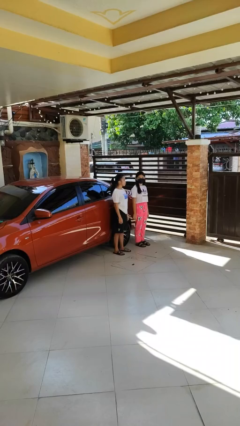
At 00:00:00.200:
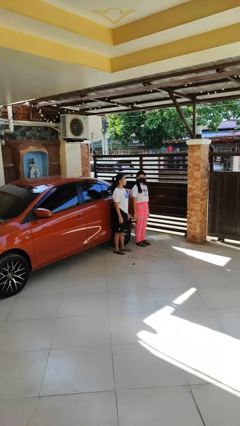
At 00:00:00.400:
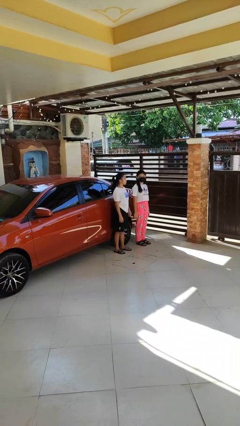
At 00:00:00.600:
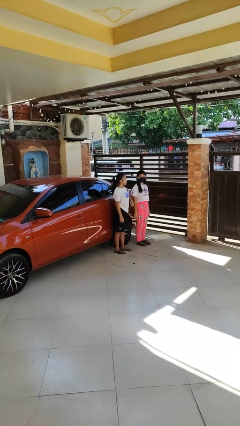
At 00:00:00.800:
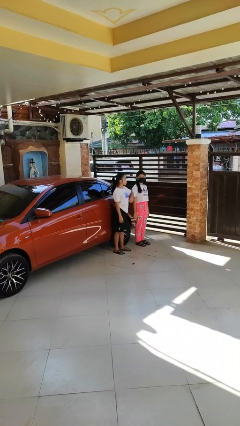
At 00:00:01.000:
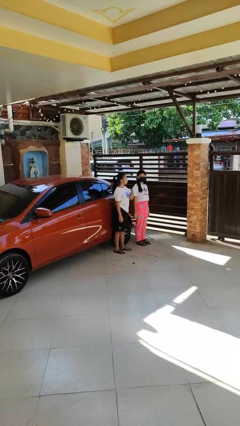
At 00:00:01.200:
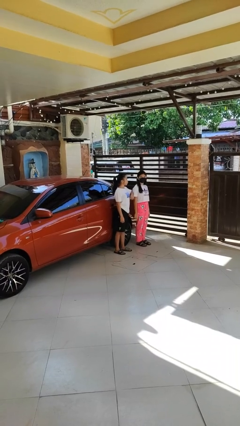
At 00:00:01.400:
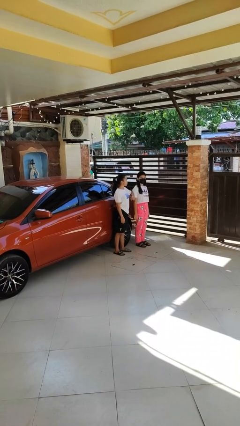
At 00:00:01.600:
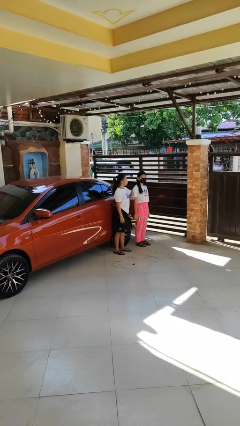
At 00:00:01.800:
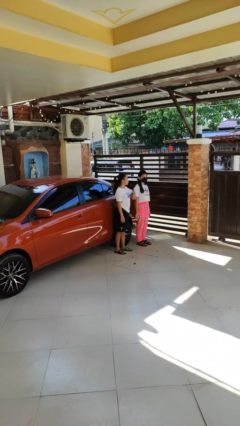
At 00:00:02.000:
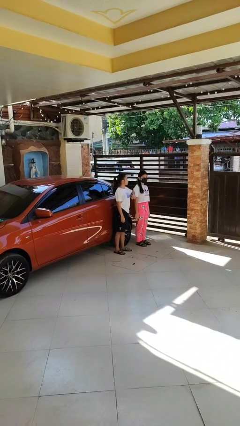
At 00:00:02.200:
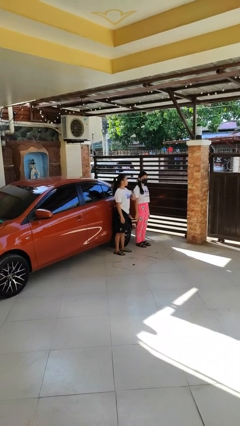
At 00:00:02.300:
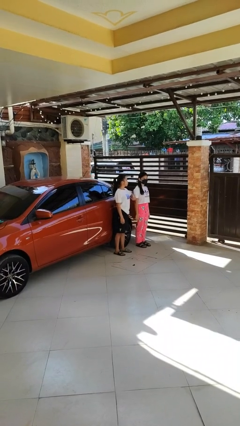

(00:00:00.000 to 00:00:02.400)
person nudges person with elbow

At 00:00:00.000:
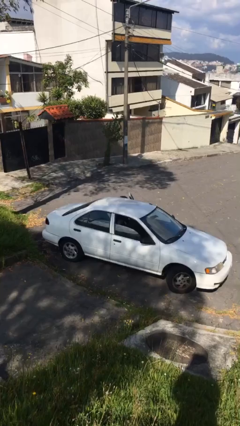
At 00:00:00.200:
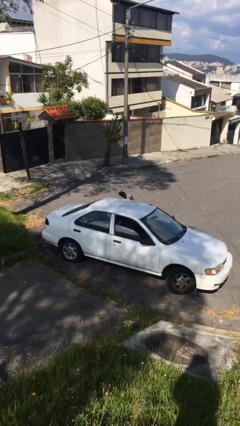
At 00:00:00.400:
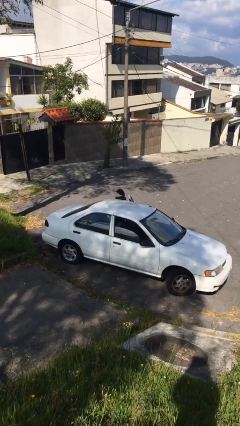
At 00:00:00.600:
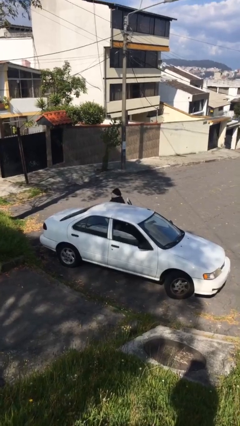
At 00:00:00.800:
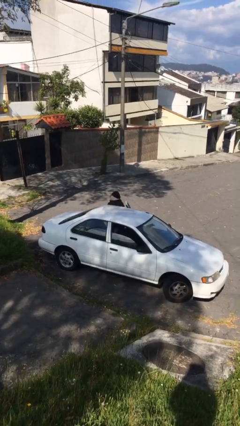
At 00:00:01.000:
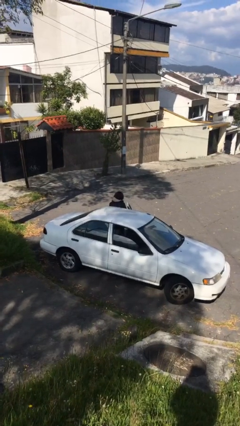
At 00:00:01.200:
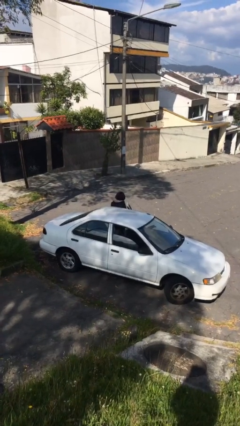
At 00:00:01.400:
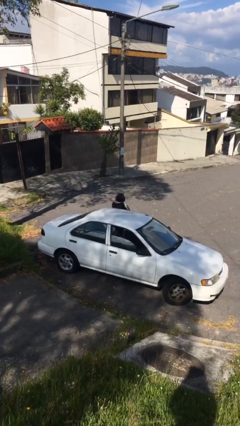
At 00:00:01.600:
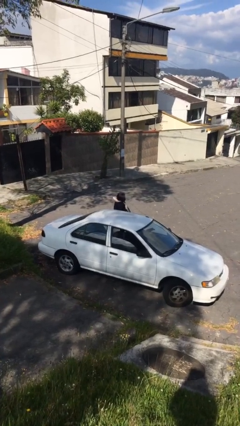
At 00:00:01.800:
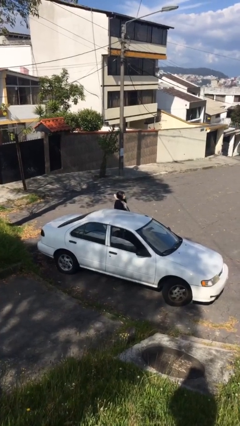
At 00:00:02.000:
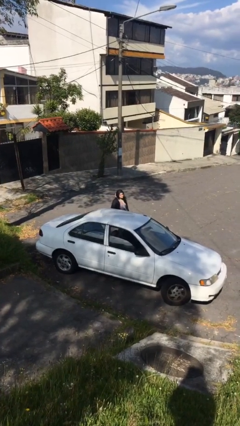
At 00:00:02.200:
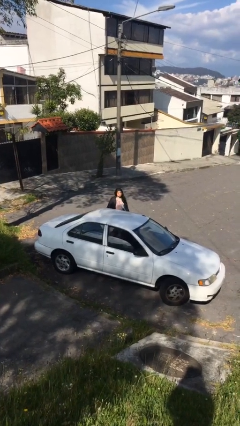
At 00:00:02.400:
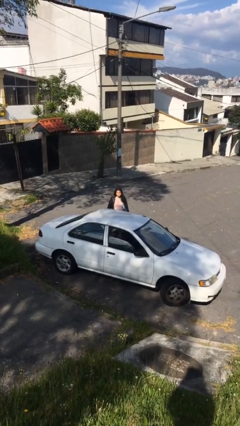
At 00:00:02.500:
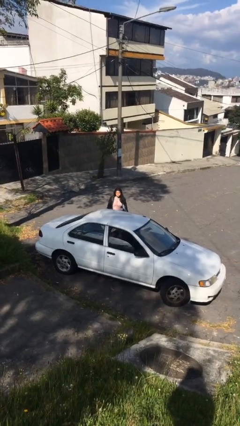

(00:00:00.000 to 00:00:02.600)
person exits car

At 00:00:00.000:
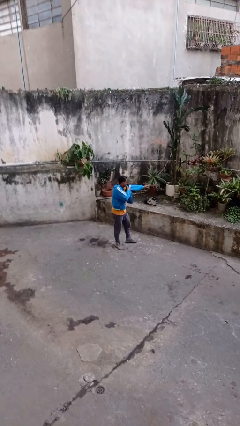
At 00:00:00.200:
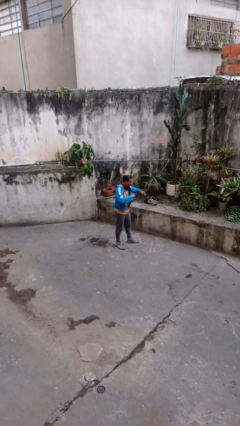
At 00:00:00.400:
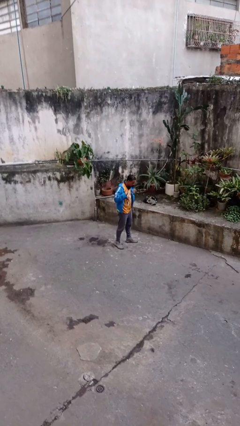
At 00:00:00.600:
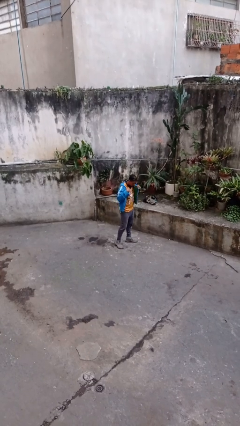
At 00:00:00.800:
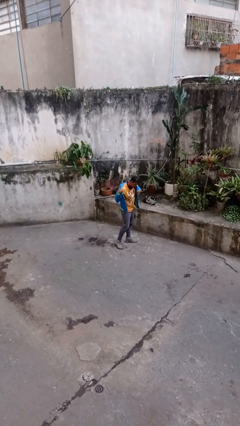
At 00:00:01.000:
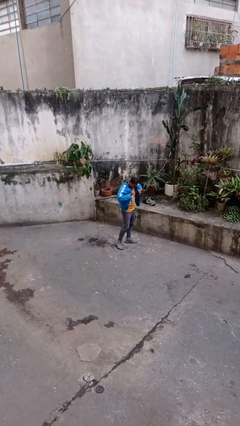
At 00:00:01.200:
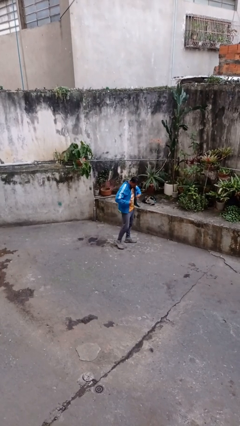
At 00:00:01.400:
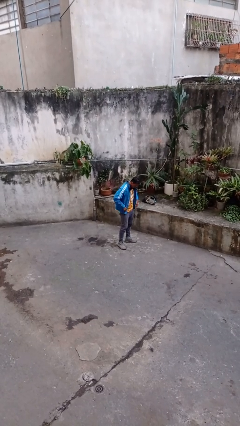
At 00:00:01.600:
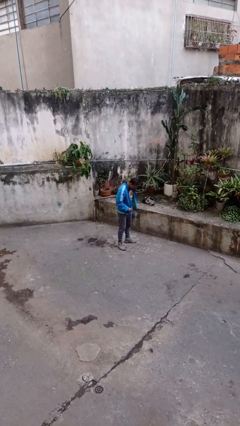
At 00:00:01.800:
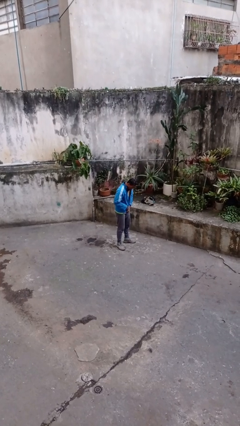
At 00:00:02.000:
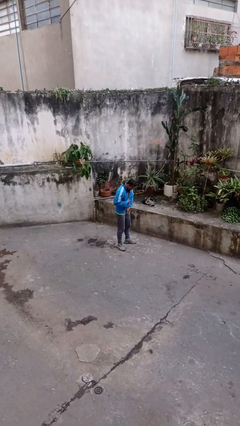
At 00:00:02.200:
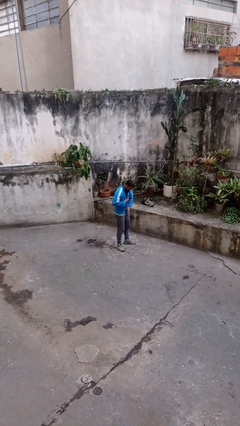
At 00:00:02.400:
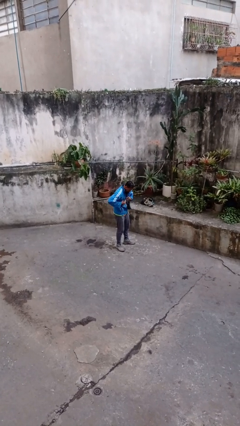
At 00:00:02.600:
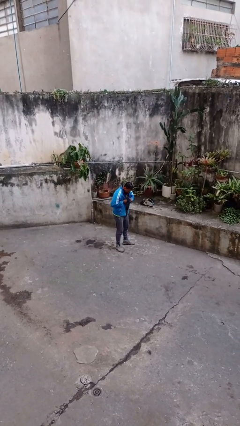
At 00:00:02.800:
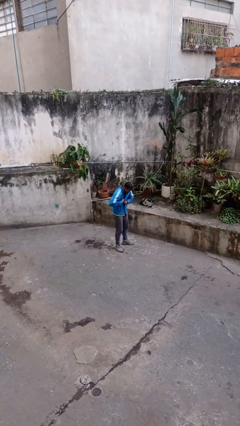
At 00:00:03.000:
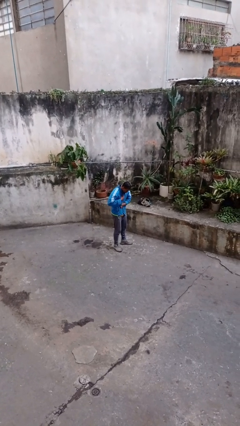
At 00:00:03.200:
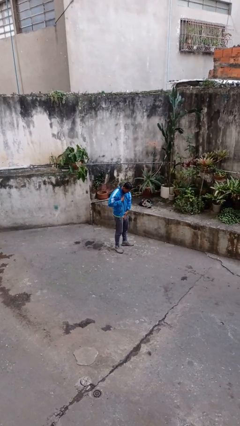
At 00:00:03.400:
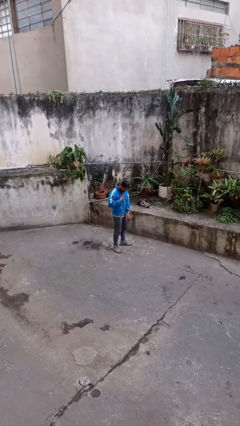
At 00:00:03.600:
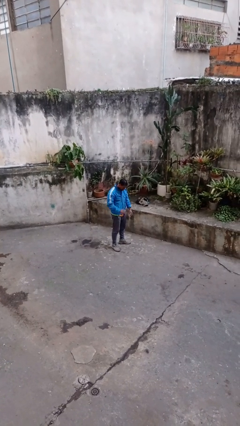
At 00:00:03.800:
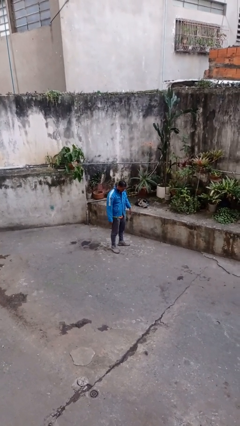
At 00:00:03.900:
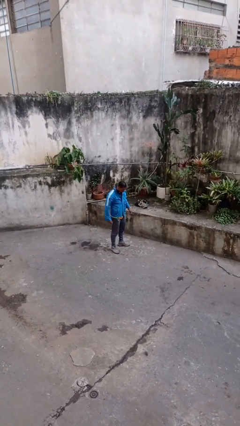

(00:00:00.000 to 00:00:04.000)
person zips up jacket

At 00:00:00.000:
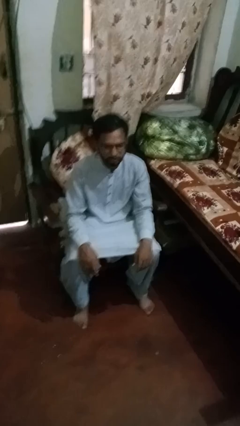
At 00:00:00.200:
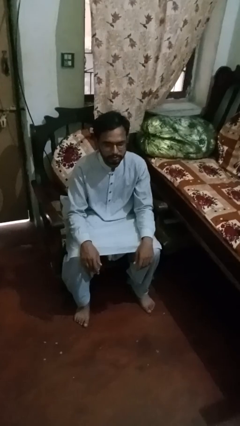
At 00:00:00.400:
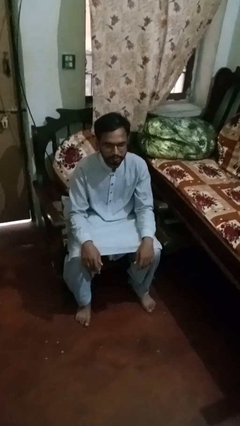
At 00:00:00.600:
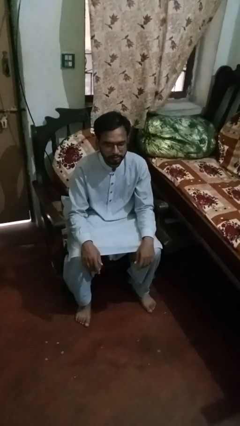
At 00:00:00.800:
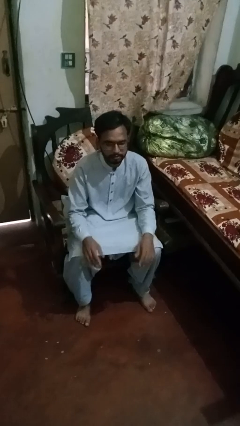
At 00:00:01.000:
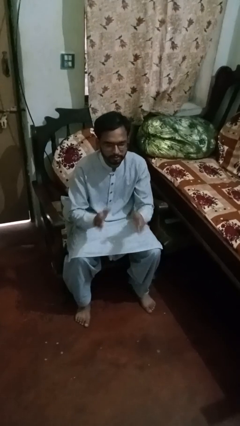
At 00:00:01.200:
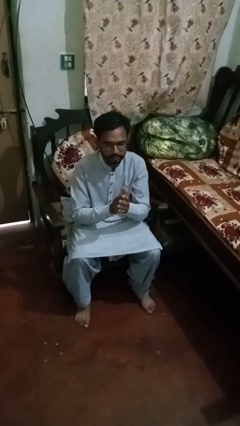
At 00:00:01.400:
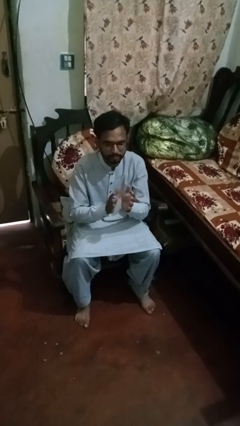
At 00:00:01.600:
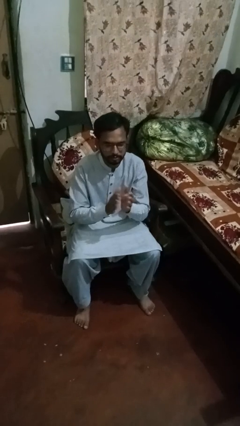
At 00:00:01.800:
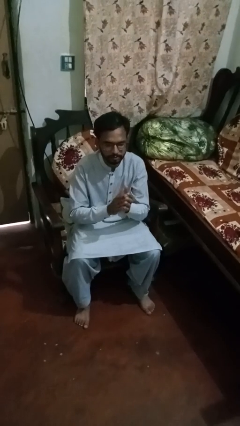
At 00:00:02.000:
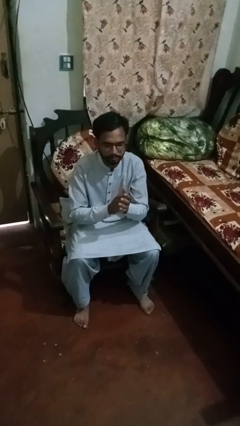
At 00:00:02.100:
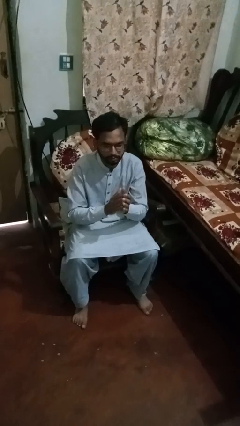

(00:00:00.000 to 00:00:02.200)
person claps hands

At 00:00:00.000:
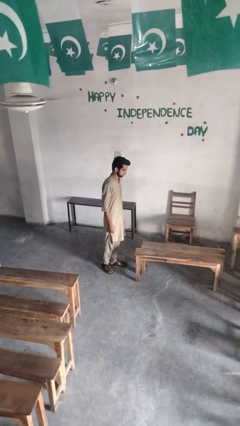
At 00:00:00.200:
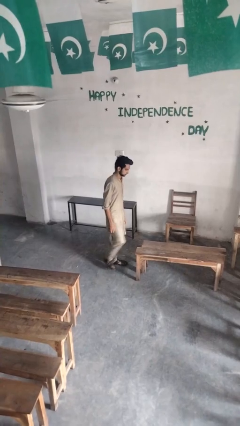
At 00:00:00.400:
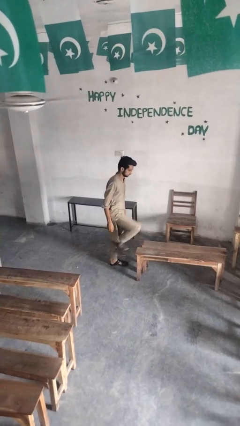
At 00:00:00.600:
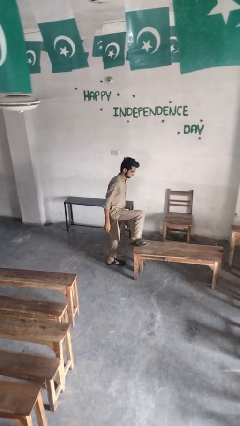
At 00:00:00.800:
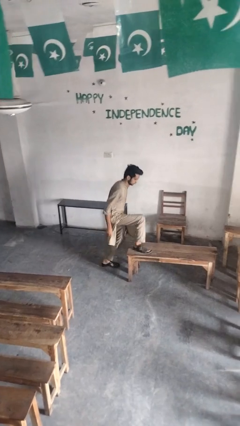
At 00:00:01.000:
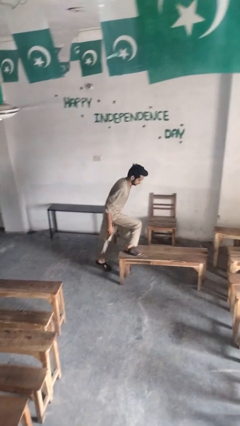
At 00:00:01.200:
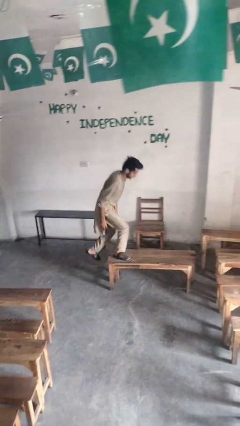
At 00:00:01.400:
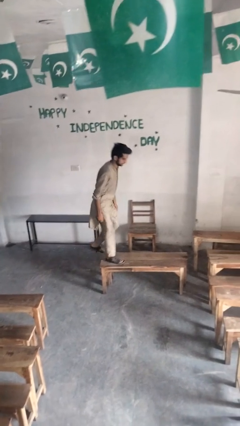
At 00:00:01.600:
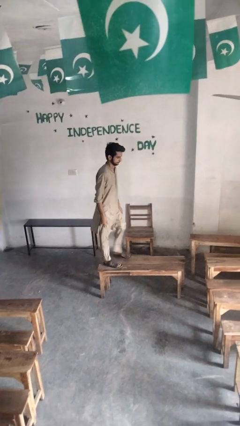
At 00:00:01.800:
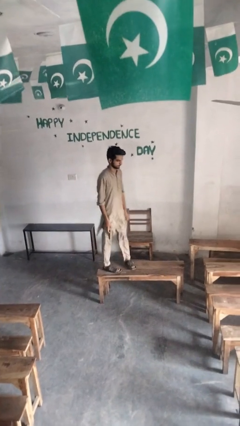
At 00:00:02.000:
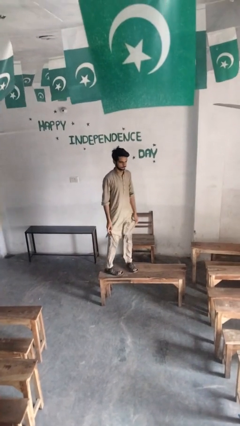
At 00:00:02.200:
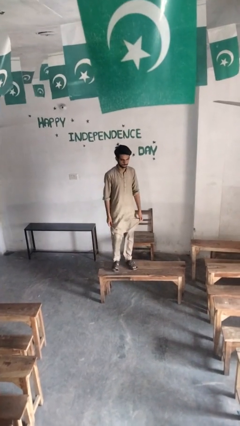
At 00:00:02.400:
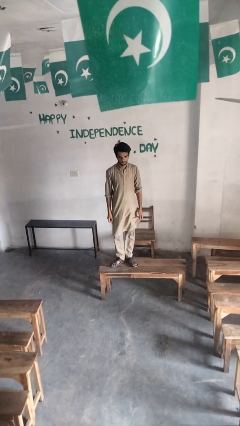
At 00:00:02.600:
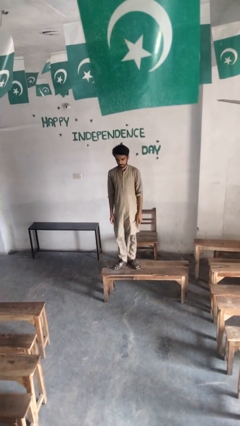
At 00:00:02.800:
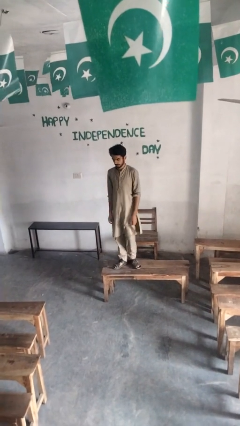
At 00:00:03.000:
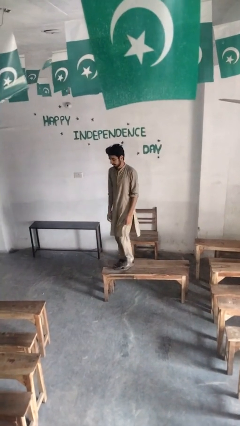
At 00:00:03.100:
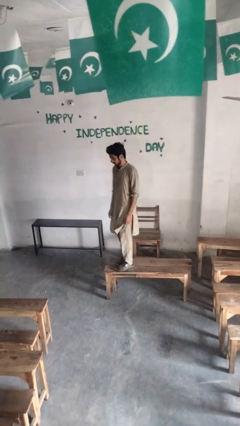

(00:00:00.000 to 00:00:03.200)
person climbs on table

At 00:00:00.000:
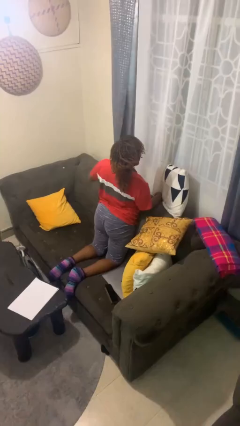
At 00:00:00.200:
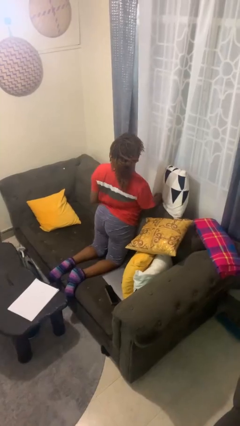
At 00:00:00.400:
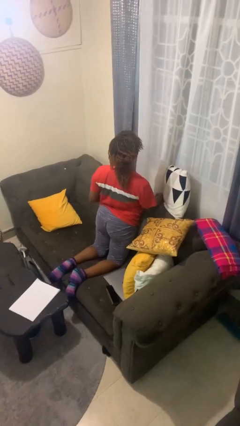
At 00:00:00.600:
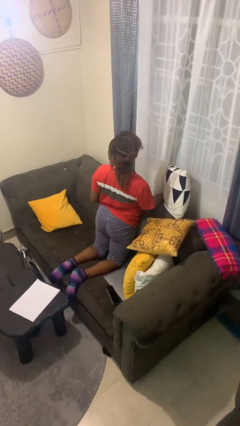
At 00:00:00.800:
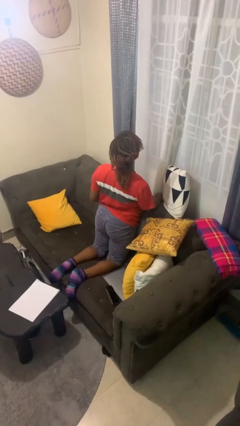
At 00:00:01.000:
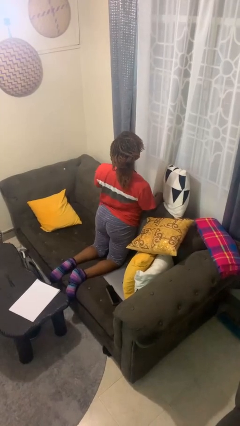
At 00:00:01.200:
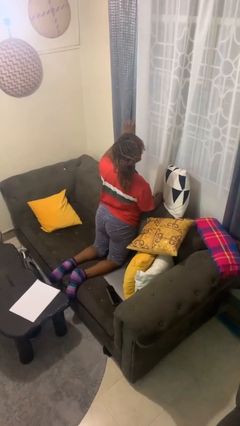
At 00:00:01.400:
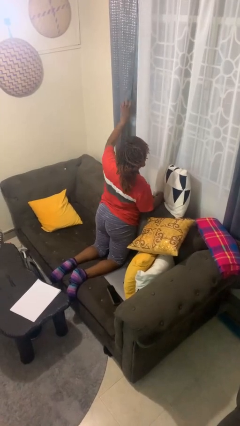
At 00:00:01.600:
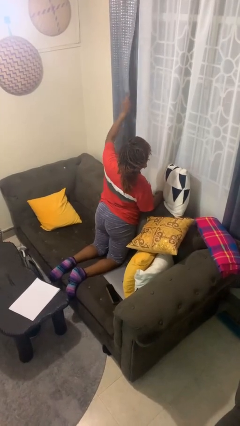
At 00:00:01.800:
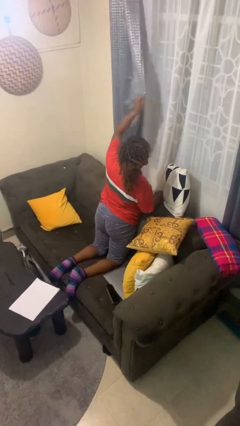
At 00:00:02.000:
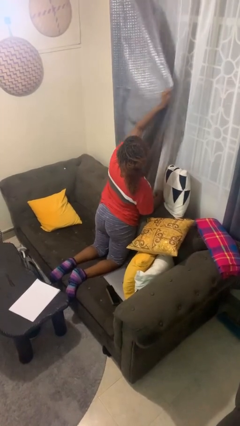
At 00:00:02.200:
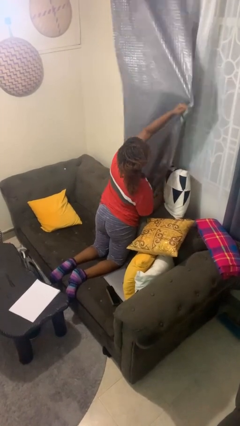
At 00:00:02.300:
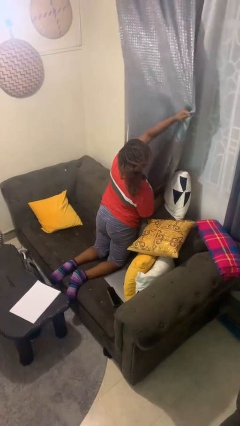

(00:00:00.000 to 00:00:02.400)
person closes curtains
